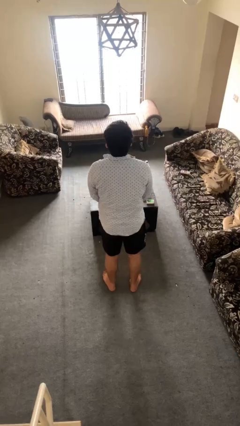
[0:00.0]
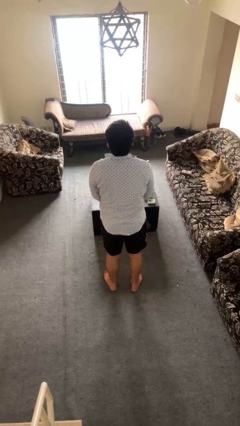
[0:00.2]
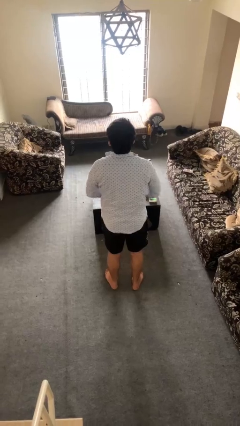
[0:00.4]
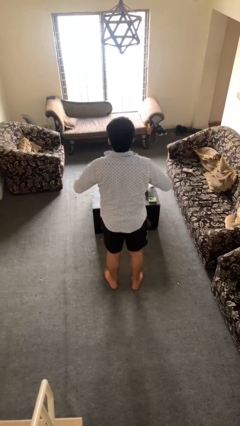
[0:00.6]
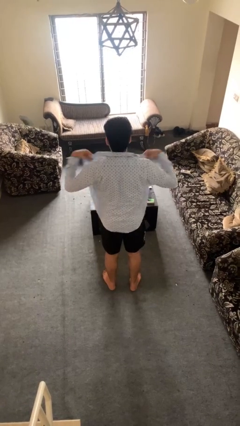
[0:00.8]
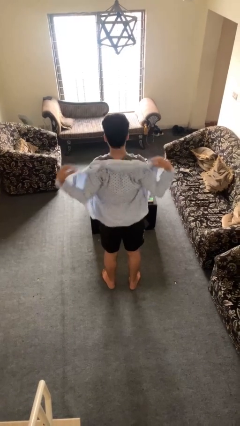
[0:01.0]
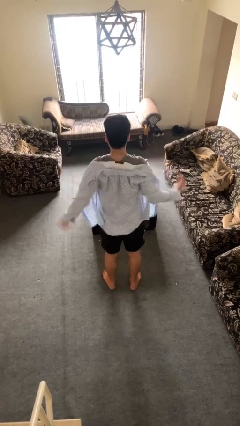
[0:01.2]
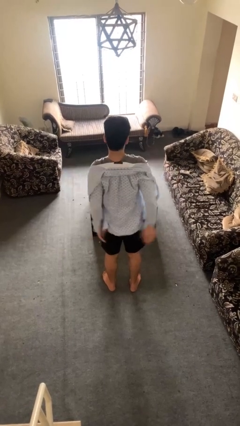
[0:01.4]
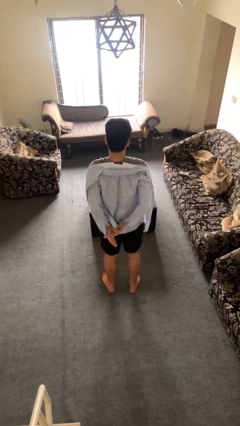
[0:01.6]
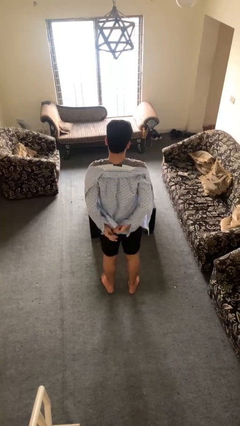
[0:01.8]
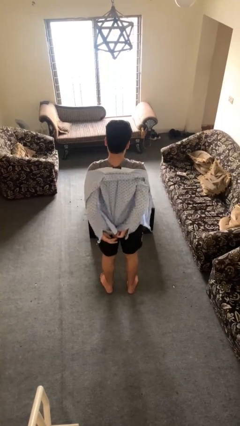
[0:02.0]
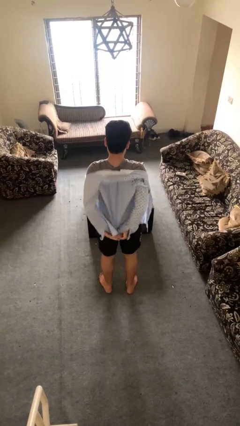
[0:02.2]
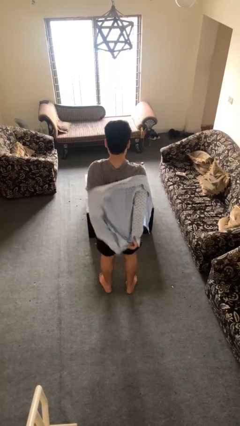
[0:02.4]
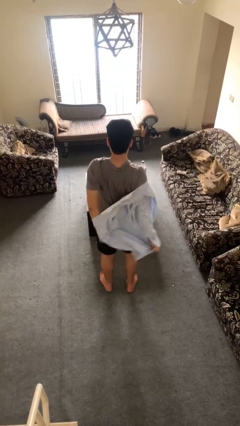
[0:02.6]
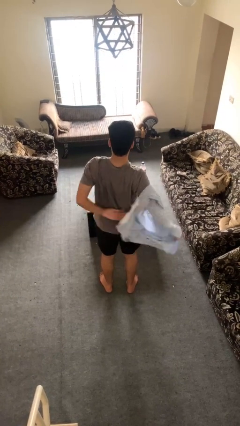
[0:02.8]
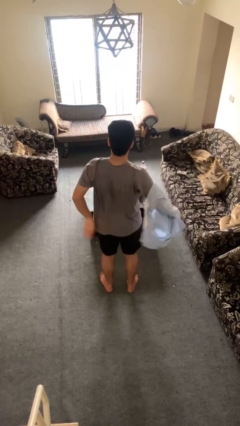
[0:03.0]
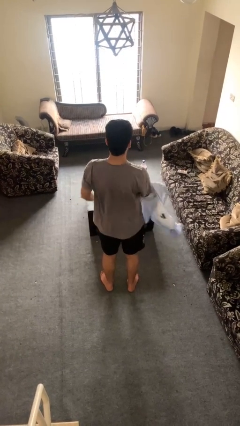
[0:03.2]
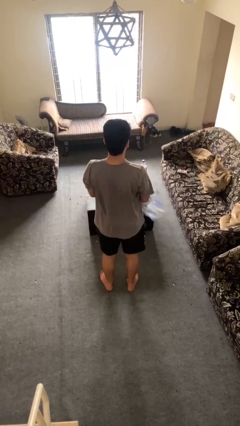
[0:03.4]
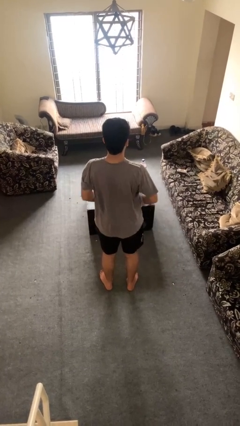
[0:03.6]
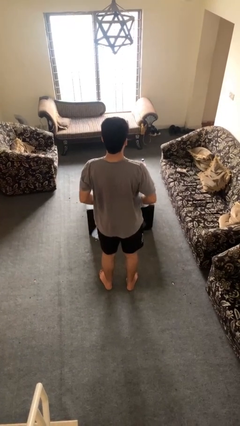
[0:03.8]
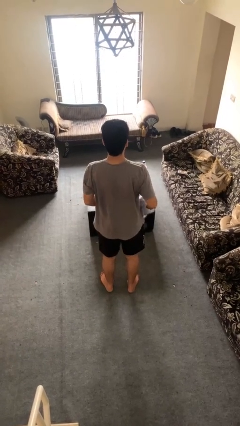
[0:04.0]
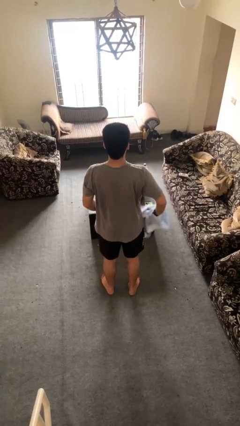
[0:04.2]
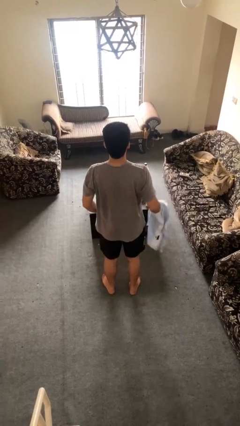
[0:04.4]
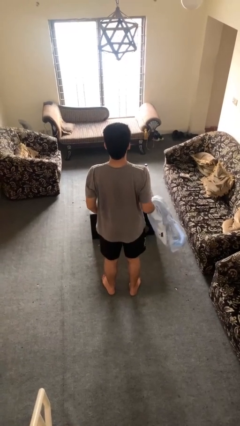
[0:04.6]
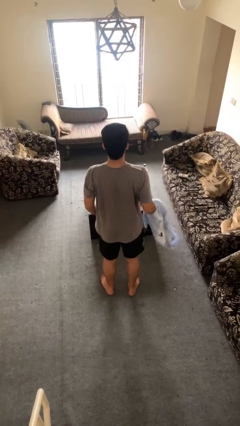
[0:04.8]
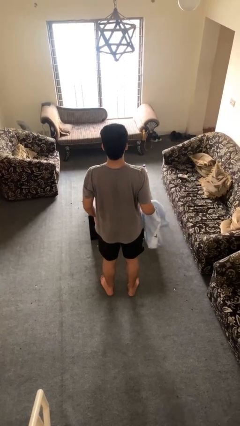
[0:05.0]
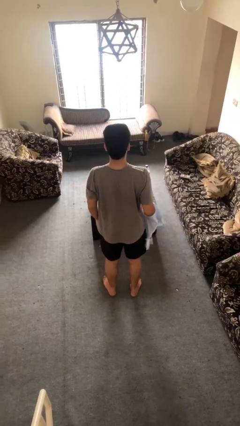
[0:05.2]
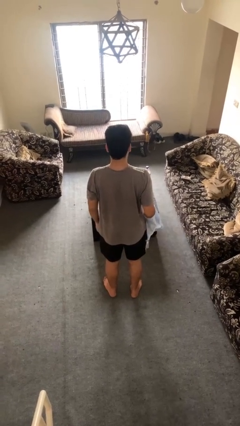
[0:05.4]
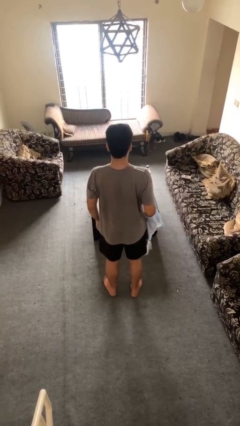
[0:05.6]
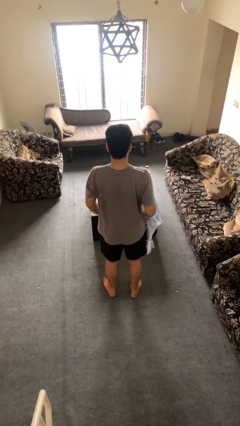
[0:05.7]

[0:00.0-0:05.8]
person takes off shirt

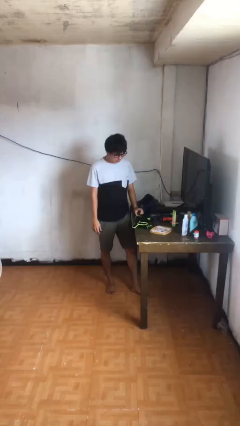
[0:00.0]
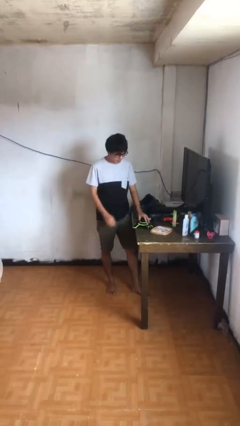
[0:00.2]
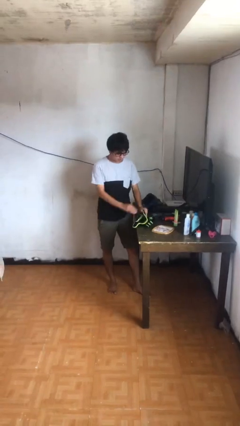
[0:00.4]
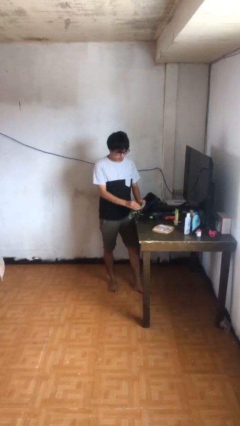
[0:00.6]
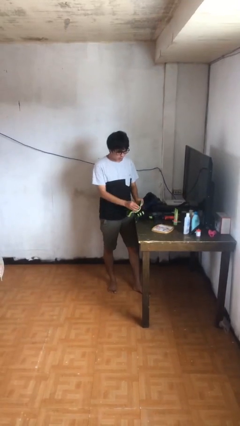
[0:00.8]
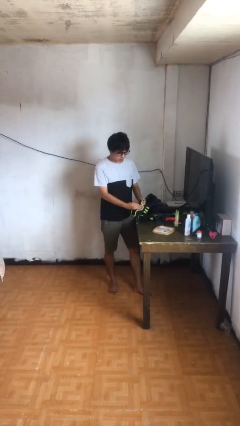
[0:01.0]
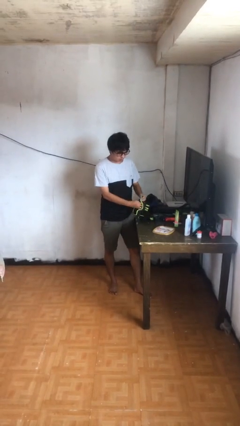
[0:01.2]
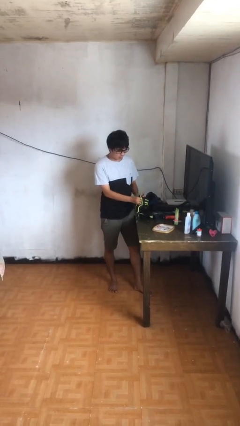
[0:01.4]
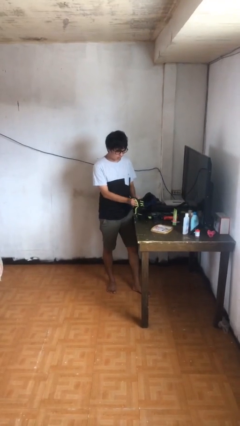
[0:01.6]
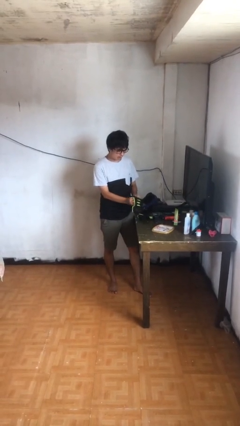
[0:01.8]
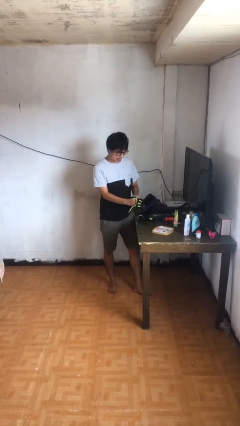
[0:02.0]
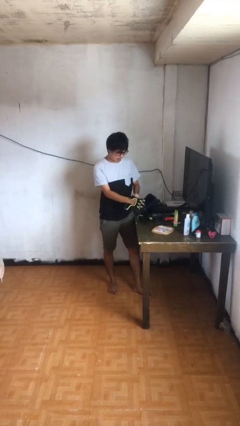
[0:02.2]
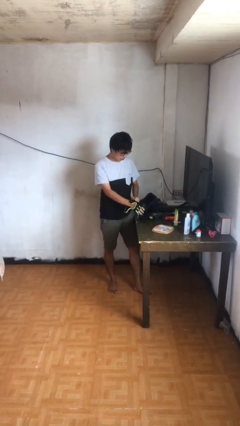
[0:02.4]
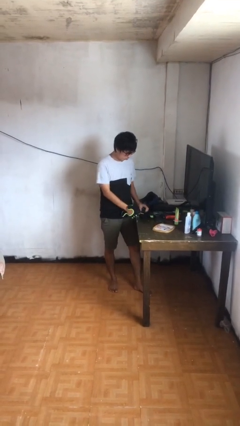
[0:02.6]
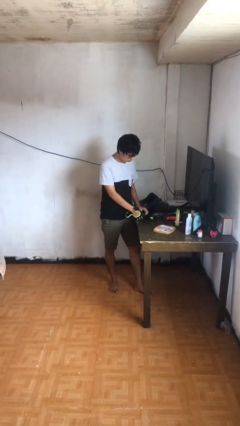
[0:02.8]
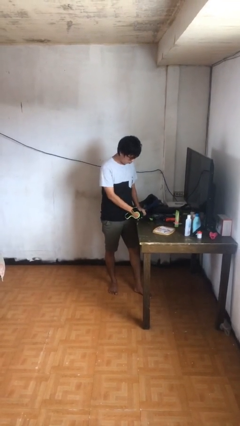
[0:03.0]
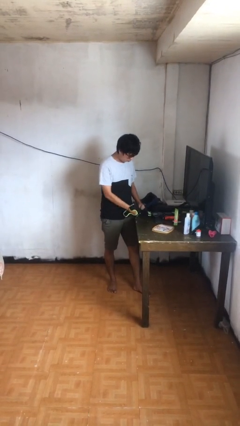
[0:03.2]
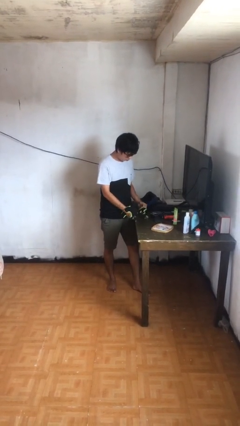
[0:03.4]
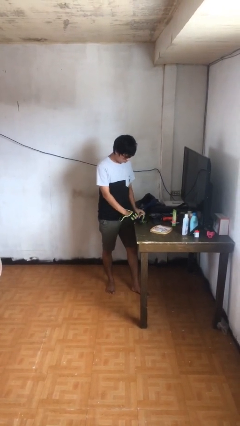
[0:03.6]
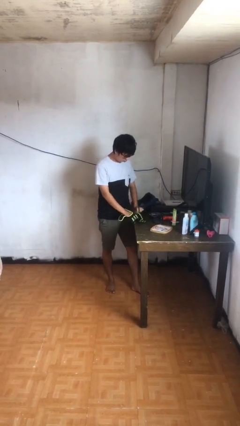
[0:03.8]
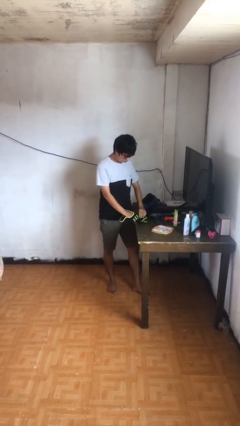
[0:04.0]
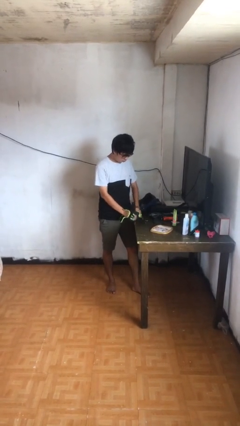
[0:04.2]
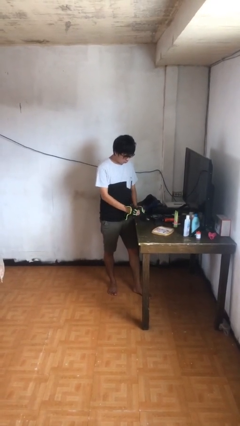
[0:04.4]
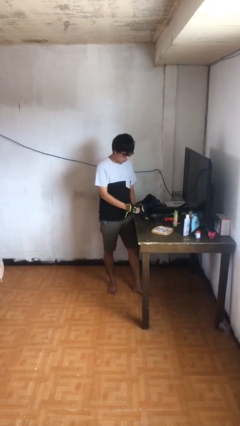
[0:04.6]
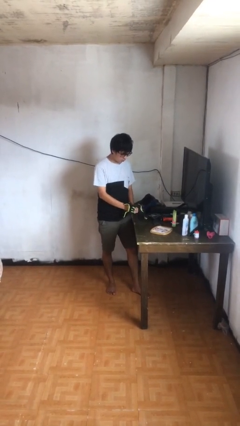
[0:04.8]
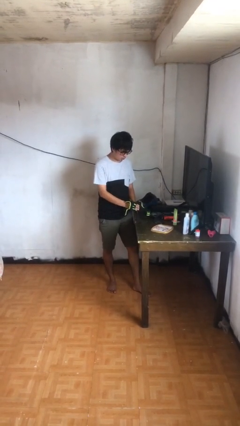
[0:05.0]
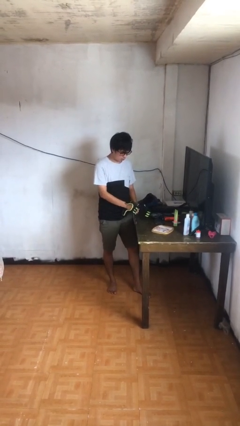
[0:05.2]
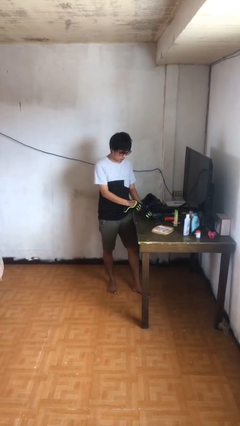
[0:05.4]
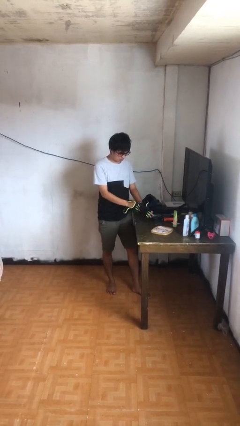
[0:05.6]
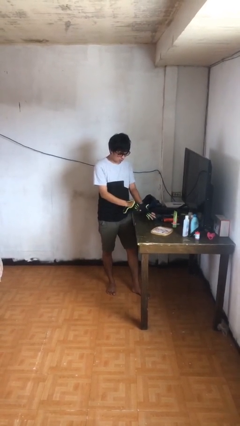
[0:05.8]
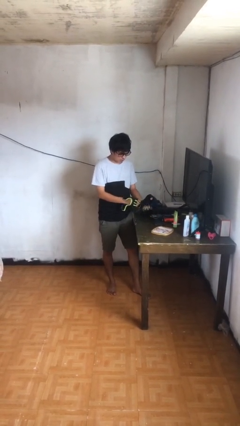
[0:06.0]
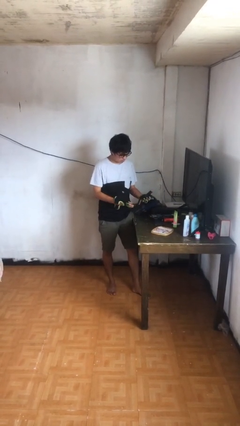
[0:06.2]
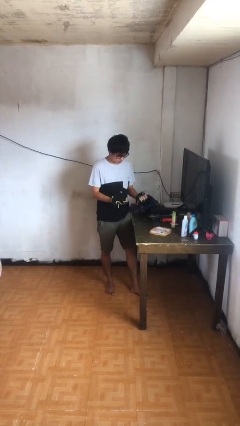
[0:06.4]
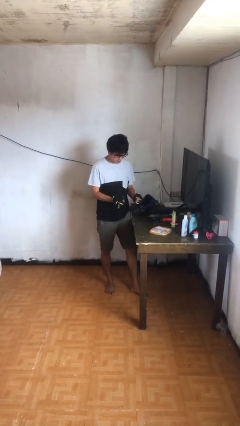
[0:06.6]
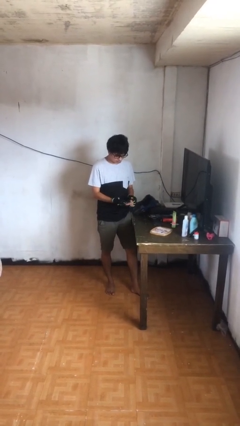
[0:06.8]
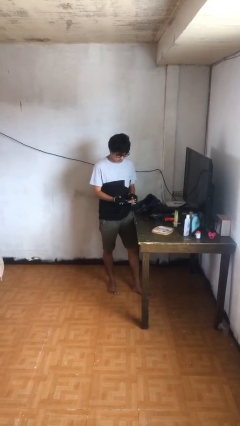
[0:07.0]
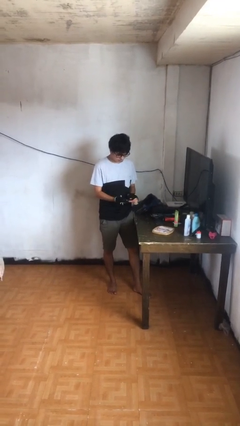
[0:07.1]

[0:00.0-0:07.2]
person puts on gloves

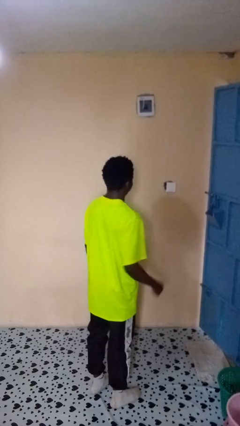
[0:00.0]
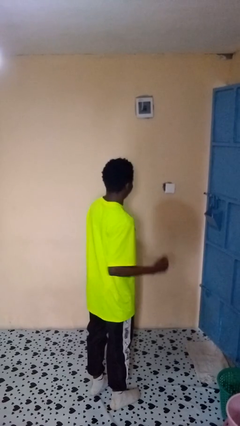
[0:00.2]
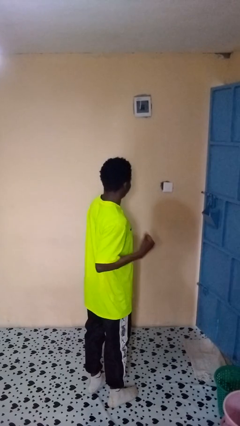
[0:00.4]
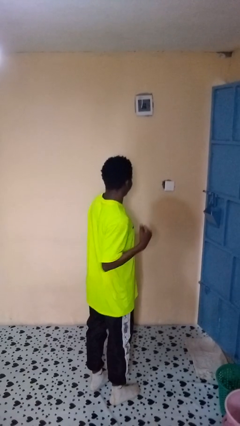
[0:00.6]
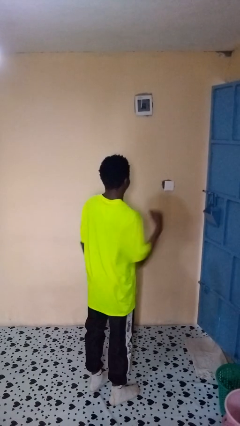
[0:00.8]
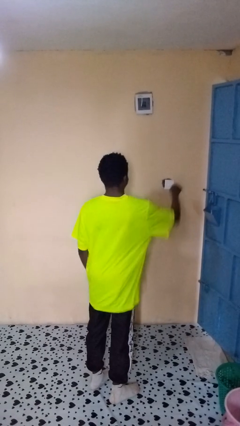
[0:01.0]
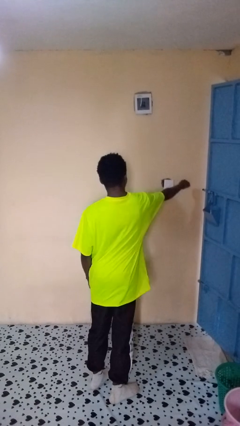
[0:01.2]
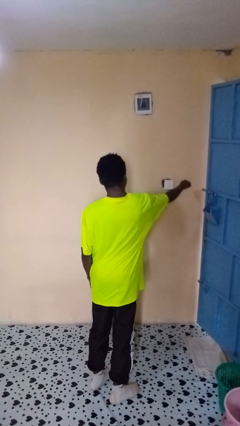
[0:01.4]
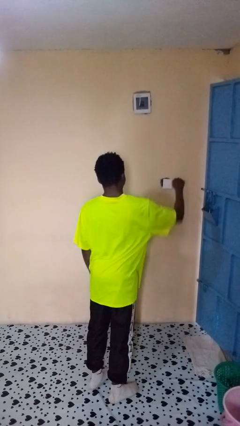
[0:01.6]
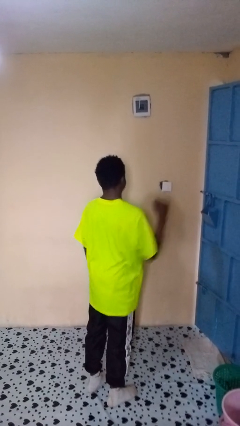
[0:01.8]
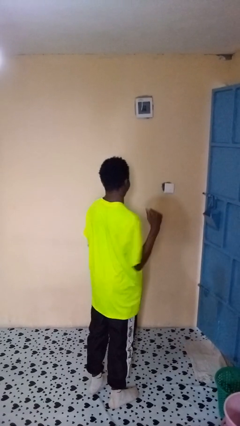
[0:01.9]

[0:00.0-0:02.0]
person karate chop

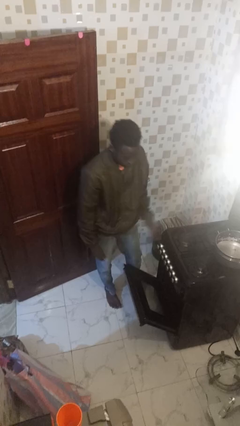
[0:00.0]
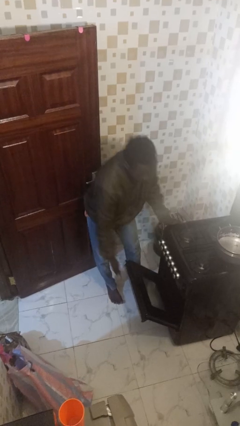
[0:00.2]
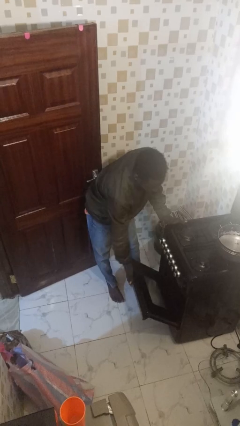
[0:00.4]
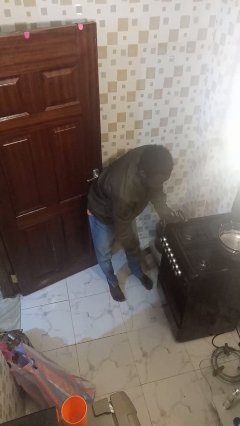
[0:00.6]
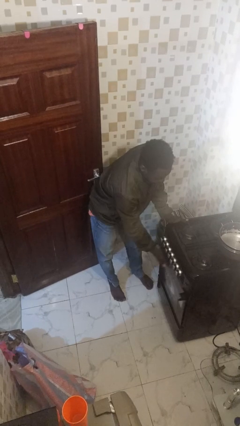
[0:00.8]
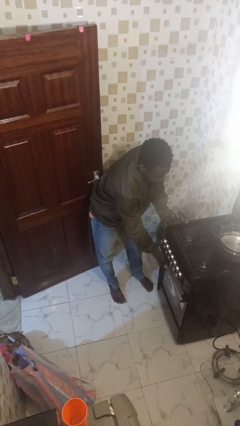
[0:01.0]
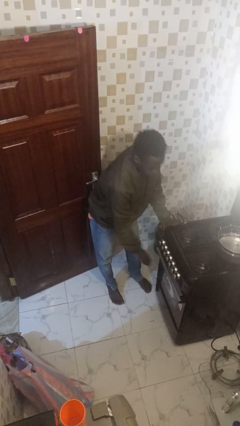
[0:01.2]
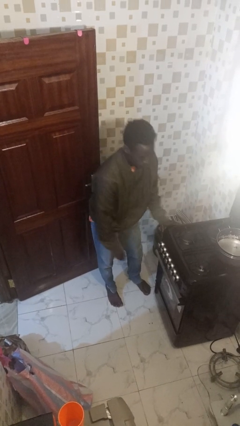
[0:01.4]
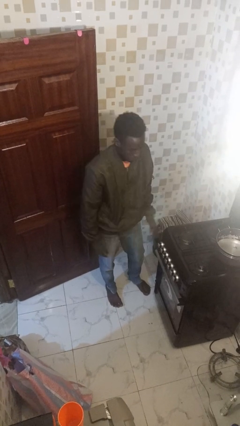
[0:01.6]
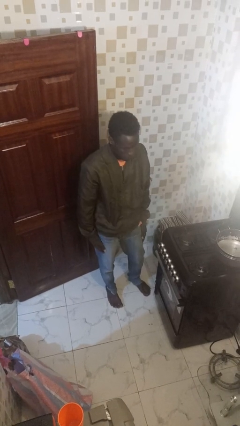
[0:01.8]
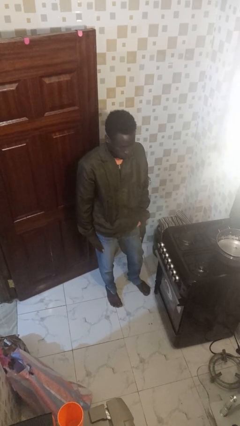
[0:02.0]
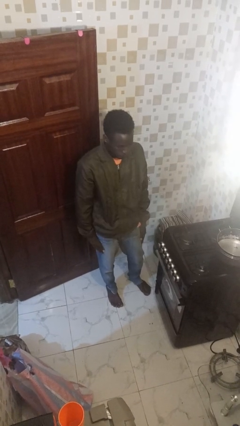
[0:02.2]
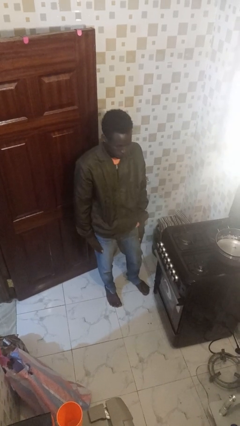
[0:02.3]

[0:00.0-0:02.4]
person closes oven door

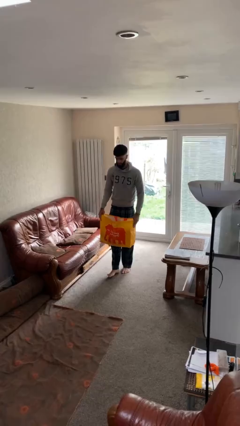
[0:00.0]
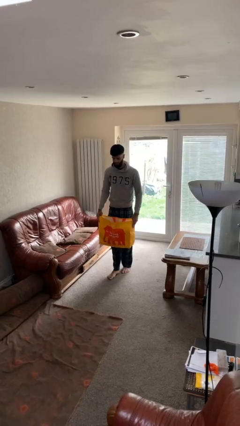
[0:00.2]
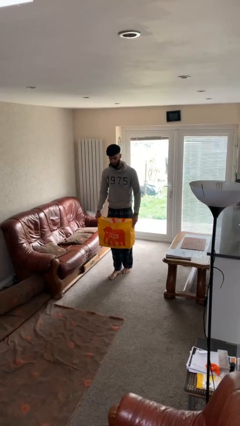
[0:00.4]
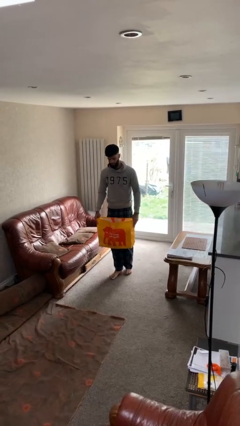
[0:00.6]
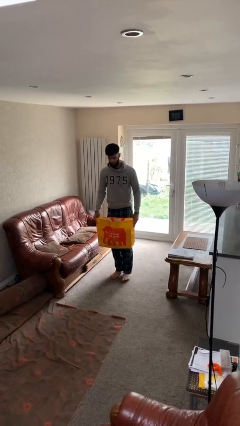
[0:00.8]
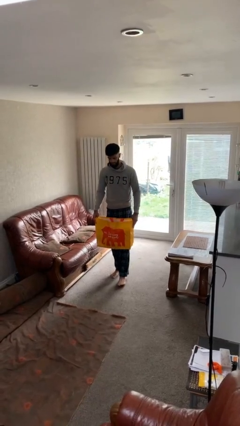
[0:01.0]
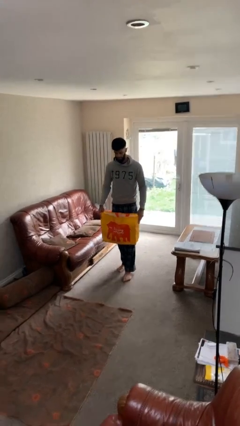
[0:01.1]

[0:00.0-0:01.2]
person puts down object on floor
